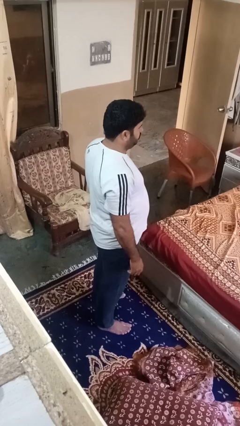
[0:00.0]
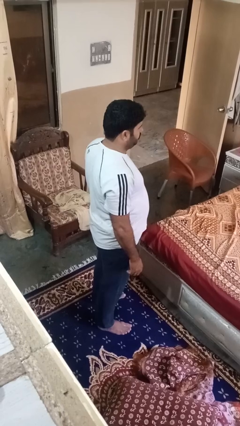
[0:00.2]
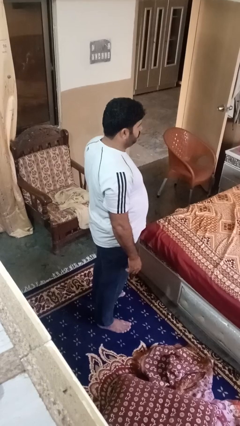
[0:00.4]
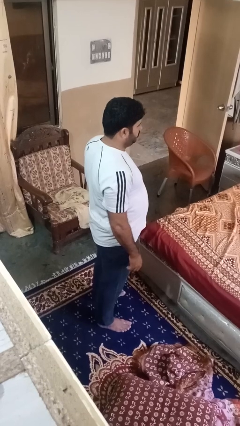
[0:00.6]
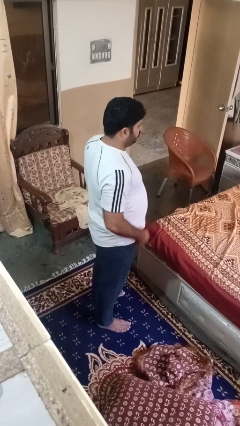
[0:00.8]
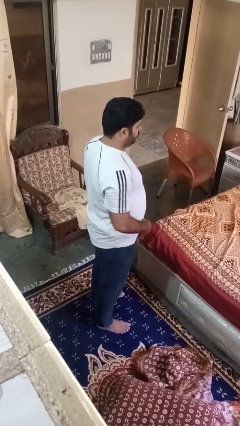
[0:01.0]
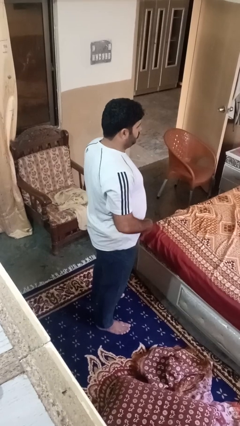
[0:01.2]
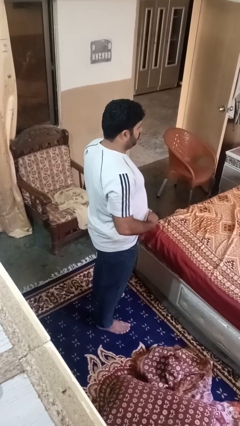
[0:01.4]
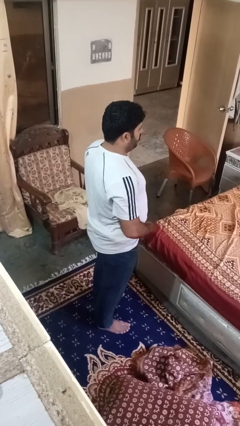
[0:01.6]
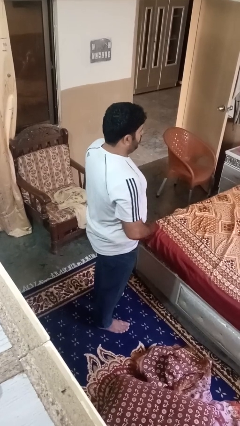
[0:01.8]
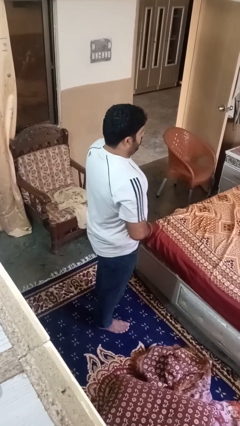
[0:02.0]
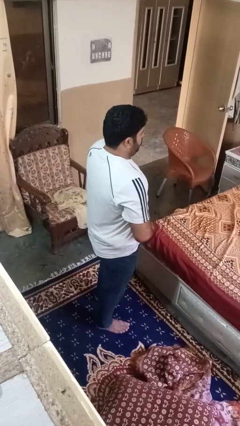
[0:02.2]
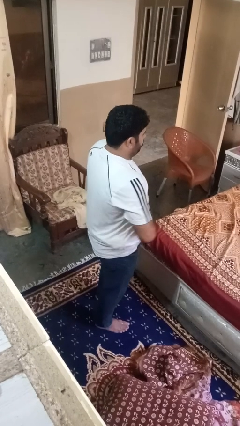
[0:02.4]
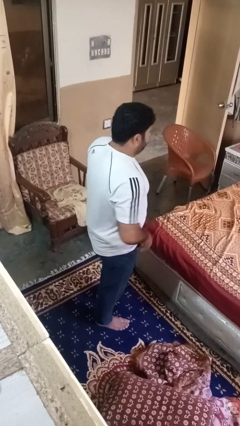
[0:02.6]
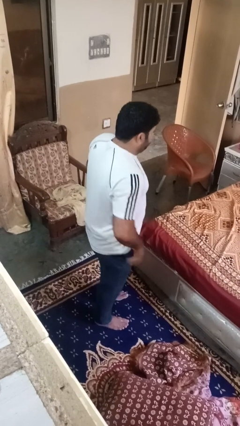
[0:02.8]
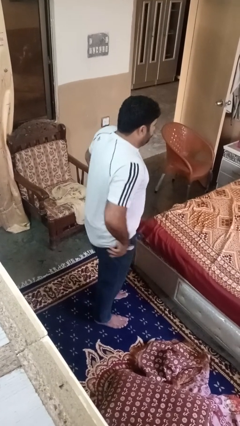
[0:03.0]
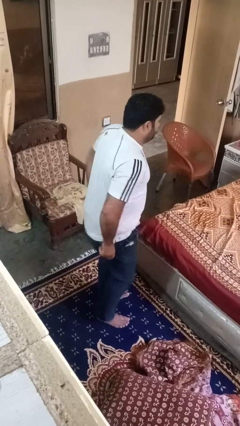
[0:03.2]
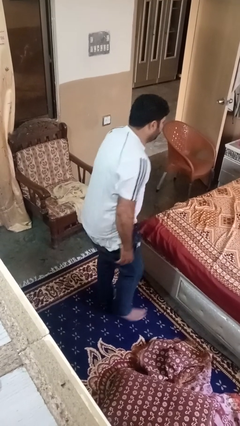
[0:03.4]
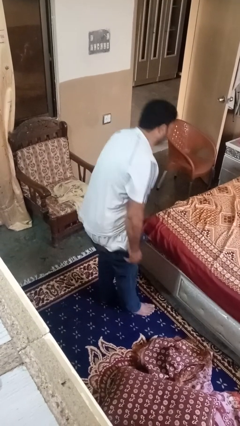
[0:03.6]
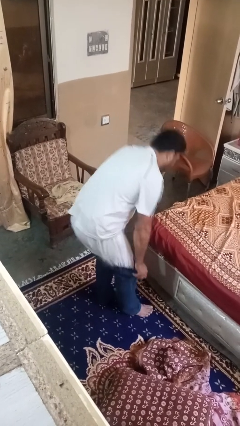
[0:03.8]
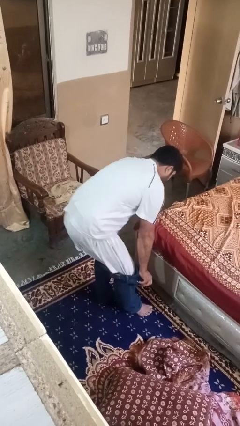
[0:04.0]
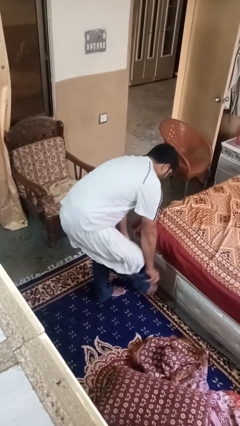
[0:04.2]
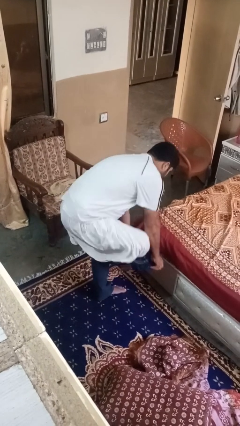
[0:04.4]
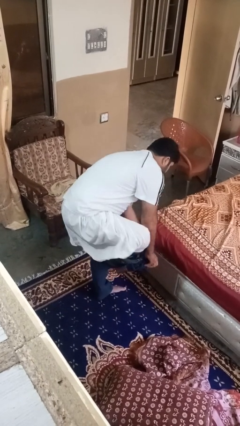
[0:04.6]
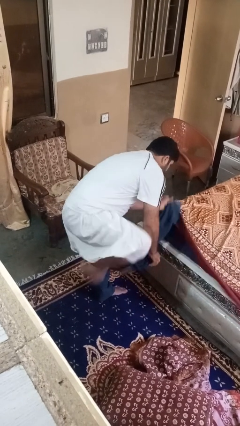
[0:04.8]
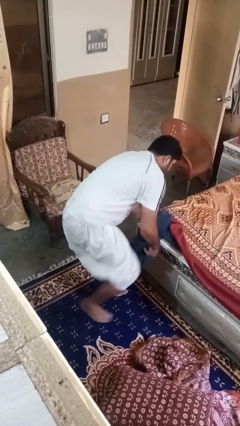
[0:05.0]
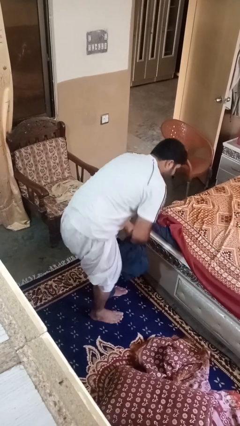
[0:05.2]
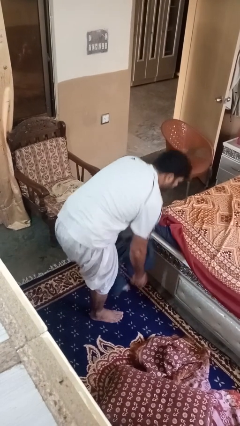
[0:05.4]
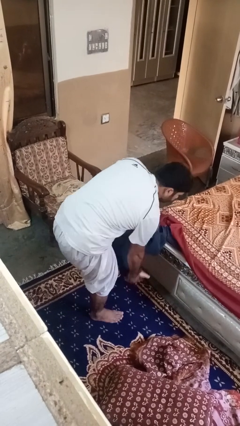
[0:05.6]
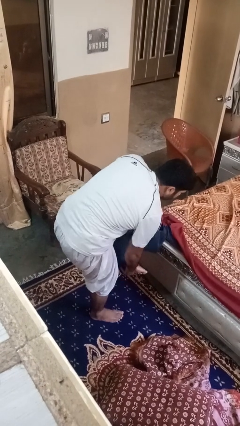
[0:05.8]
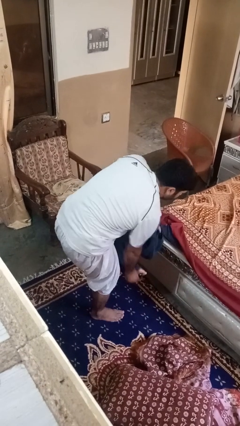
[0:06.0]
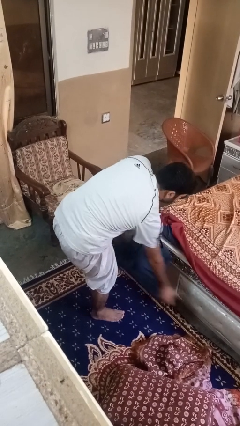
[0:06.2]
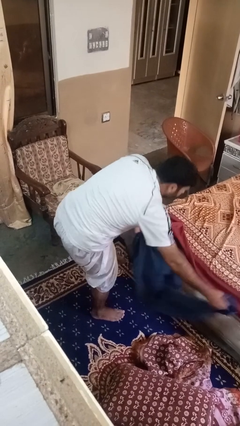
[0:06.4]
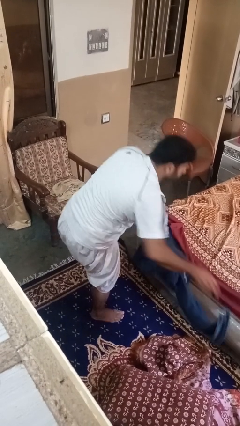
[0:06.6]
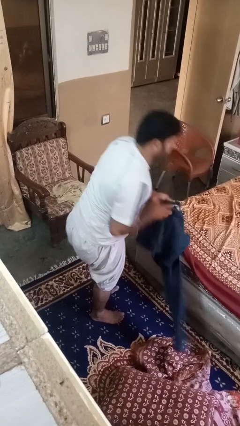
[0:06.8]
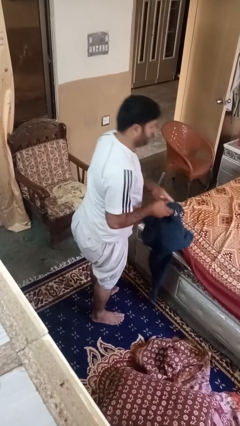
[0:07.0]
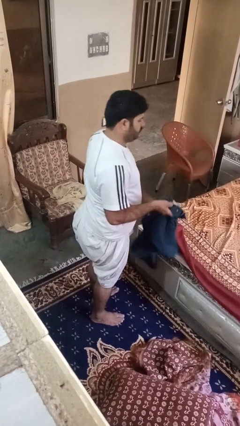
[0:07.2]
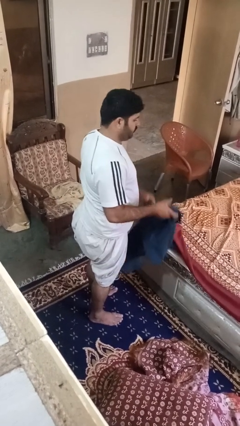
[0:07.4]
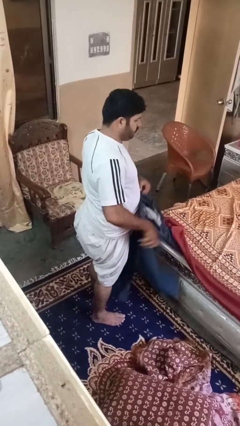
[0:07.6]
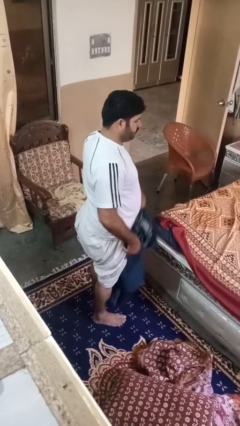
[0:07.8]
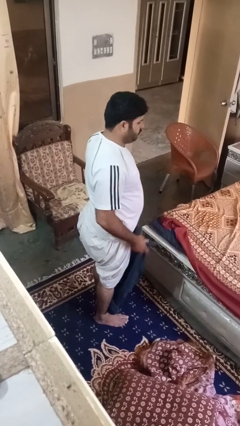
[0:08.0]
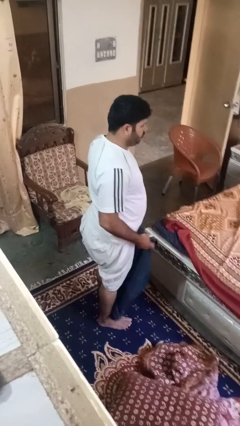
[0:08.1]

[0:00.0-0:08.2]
person takes off pants

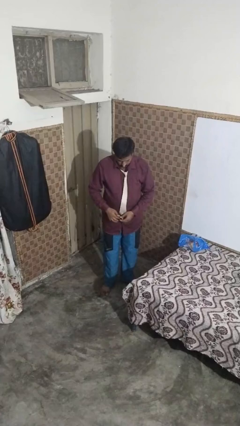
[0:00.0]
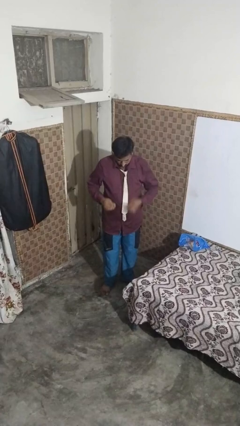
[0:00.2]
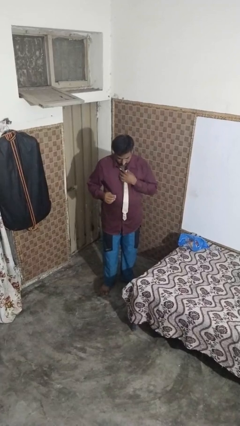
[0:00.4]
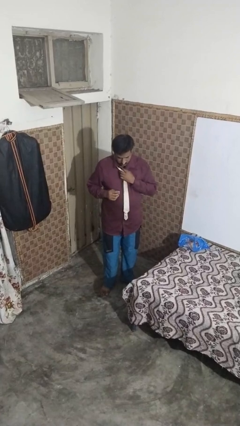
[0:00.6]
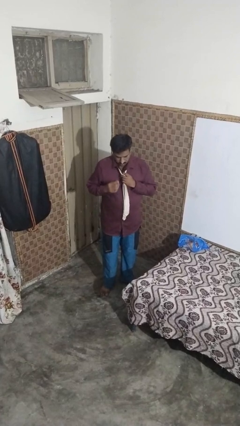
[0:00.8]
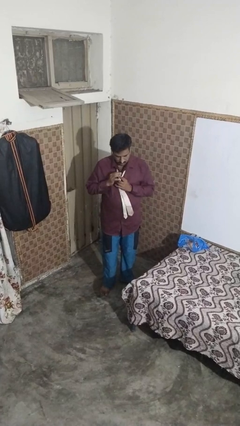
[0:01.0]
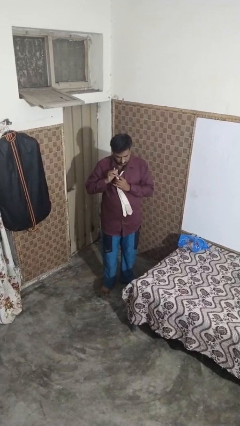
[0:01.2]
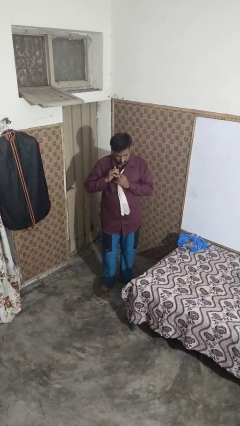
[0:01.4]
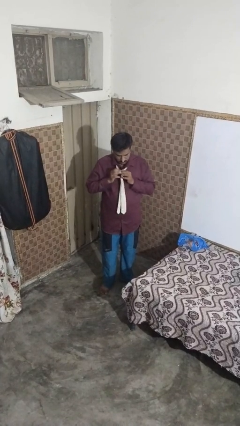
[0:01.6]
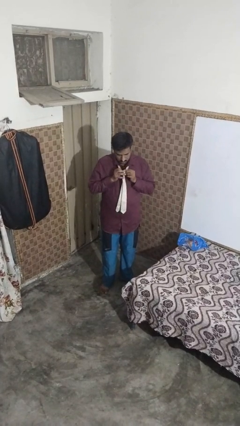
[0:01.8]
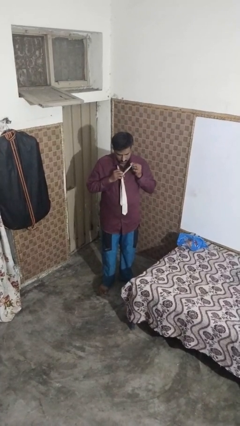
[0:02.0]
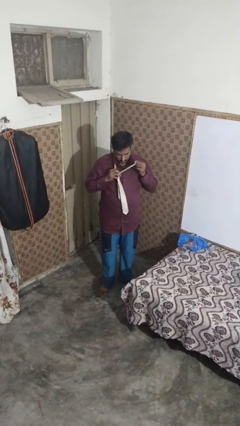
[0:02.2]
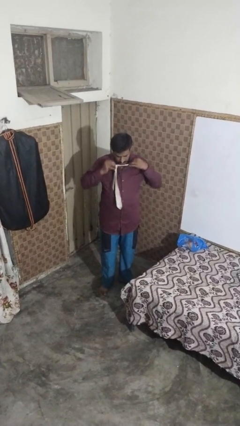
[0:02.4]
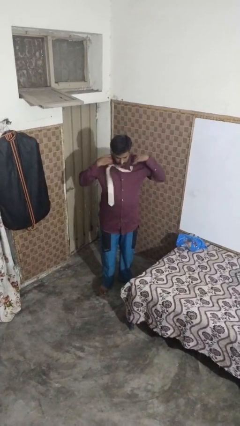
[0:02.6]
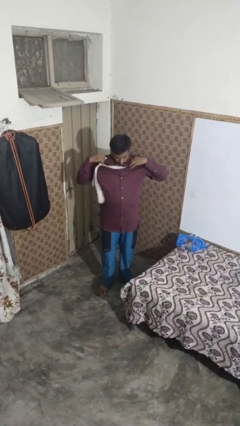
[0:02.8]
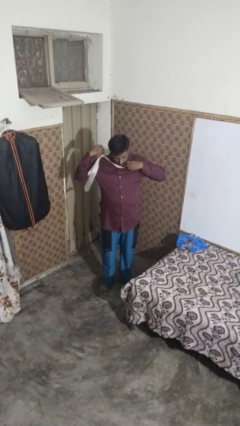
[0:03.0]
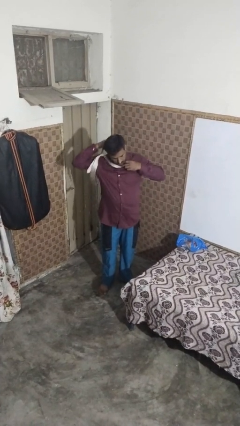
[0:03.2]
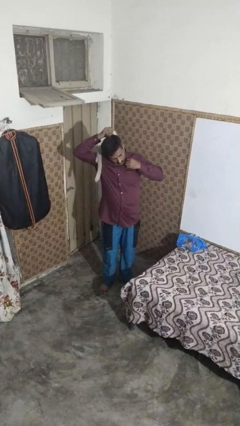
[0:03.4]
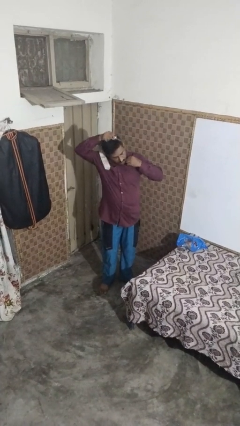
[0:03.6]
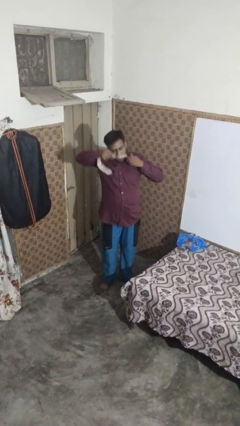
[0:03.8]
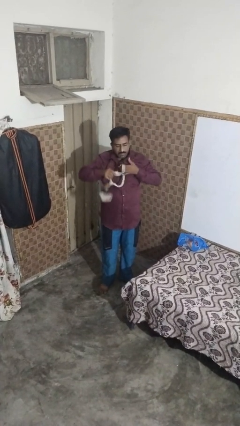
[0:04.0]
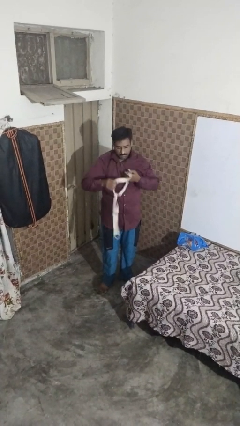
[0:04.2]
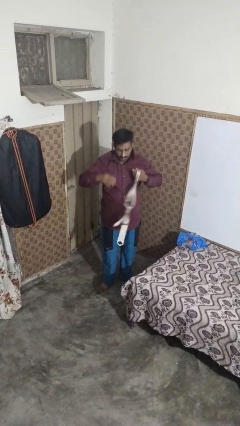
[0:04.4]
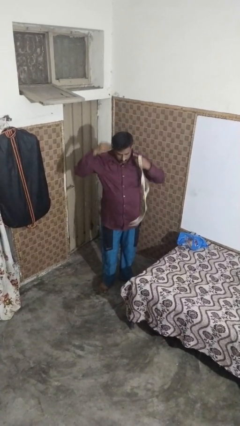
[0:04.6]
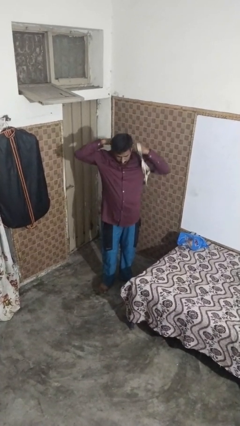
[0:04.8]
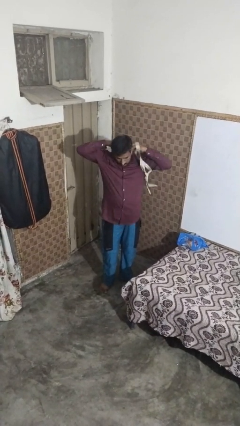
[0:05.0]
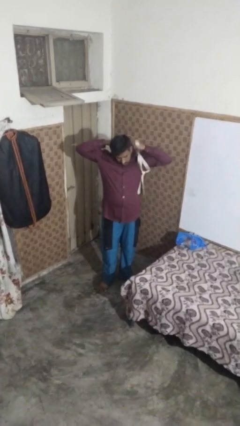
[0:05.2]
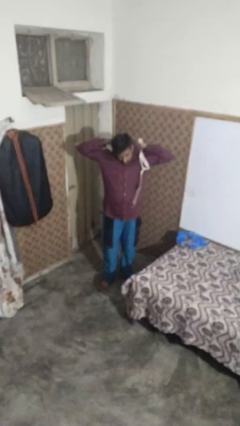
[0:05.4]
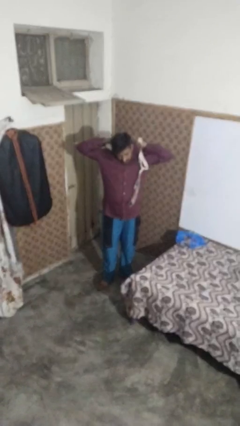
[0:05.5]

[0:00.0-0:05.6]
person takes off necktie

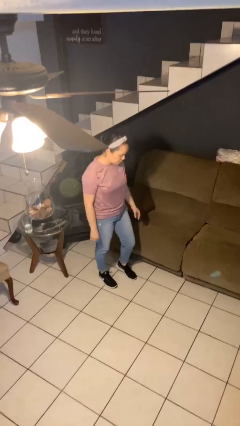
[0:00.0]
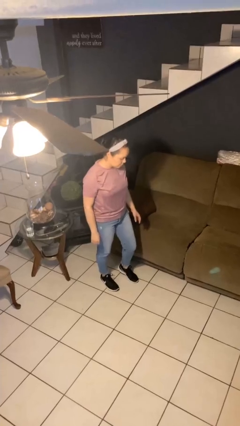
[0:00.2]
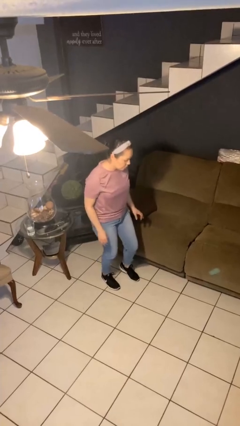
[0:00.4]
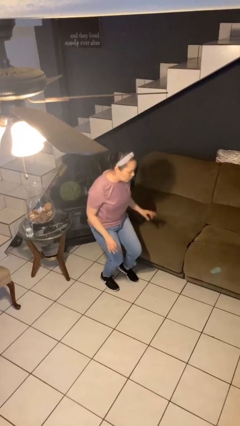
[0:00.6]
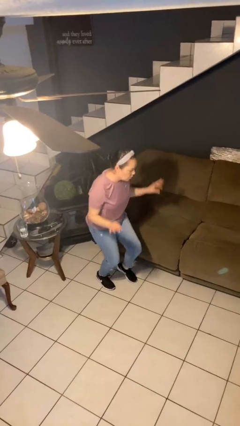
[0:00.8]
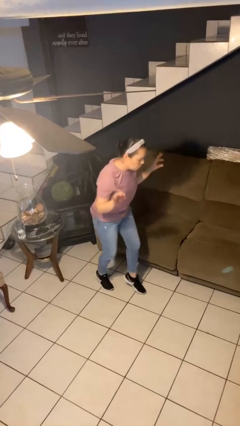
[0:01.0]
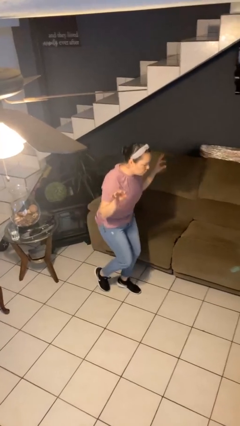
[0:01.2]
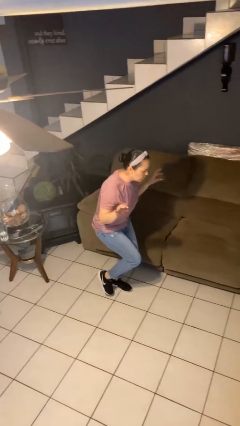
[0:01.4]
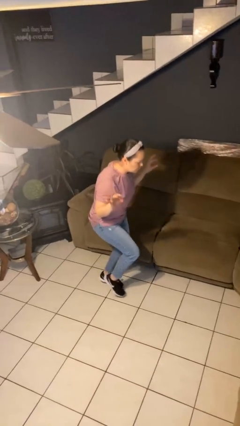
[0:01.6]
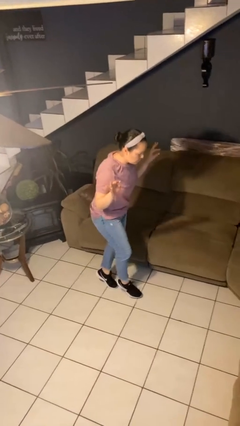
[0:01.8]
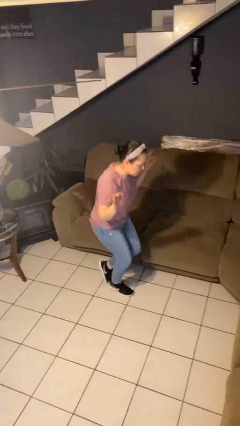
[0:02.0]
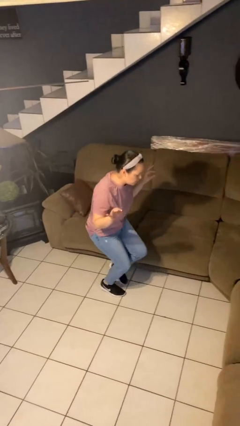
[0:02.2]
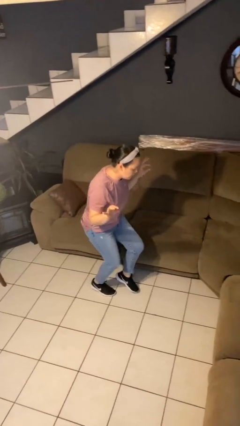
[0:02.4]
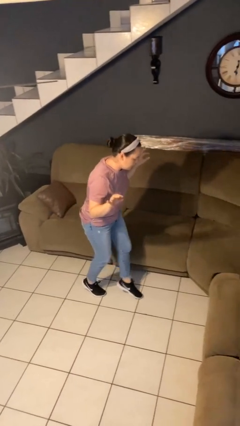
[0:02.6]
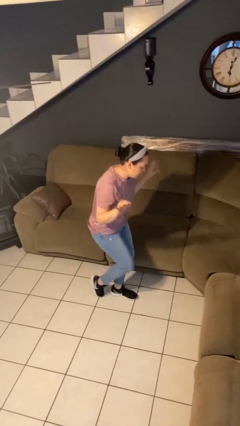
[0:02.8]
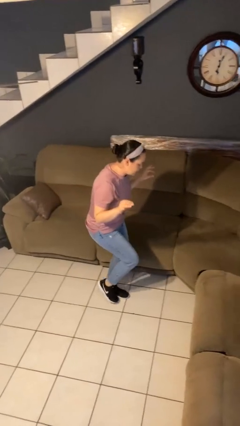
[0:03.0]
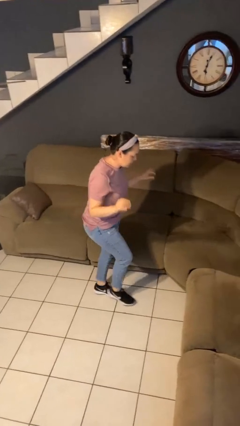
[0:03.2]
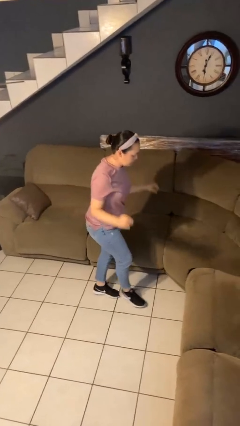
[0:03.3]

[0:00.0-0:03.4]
person walks tiptoe

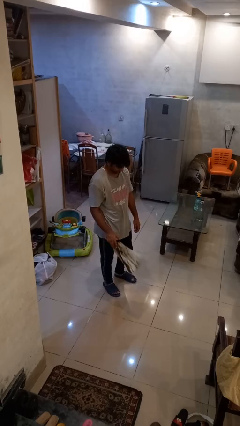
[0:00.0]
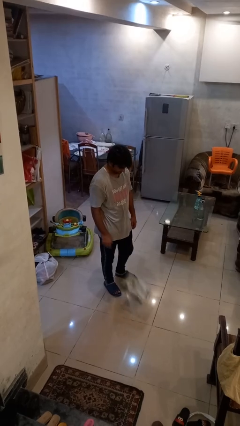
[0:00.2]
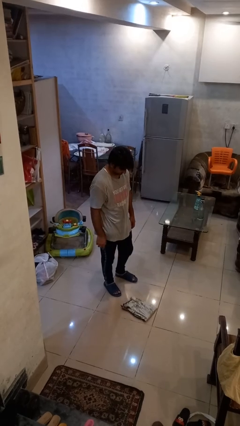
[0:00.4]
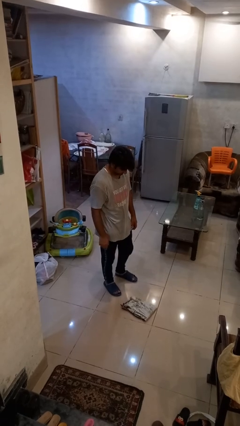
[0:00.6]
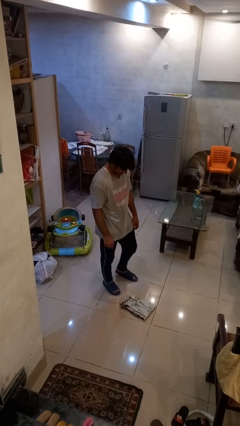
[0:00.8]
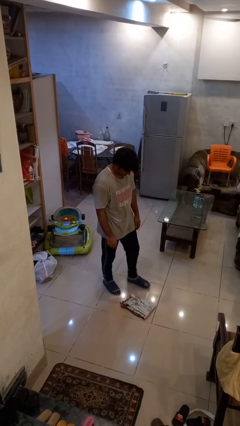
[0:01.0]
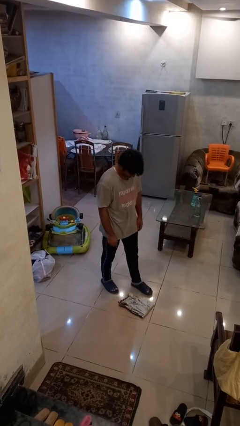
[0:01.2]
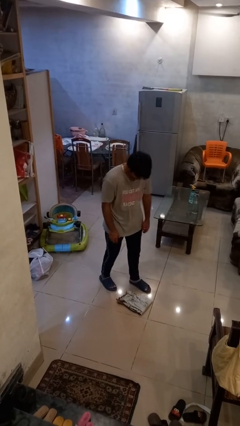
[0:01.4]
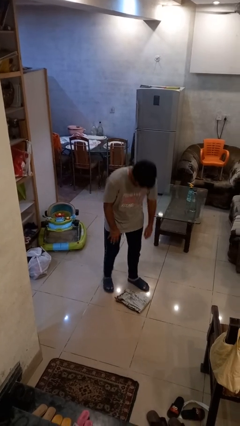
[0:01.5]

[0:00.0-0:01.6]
person drops object
